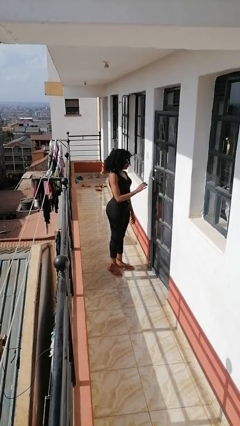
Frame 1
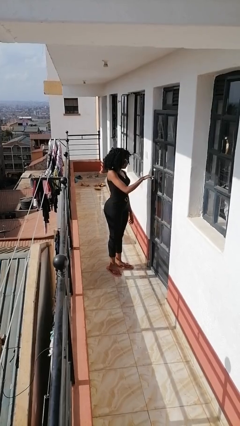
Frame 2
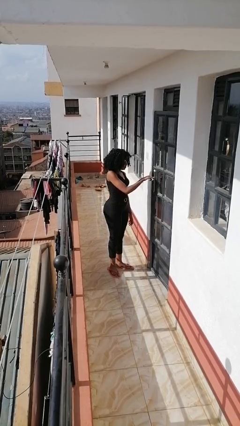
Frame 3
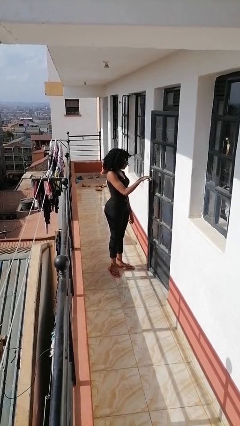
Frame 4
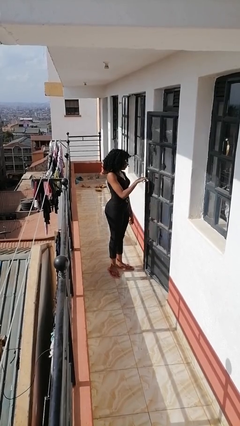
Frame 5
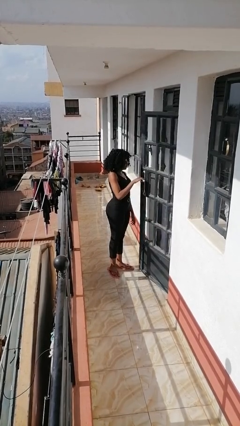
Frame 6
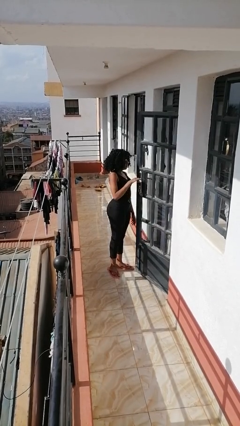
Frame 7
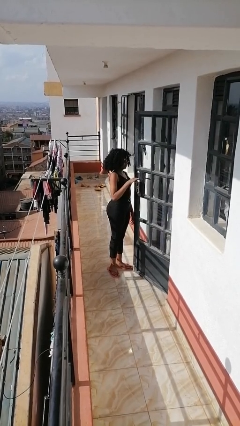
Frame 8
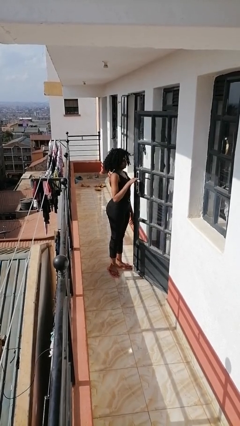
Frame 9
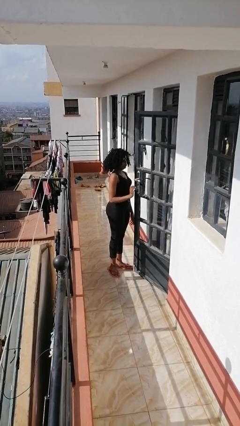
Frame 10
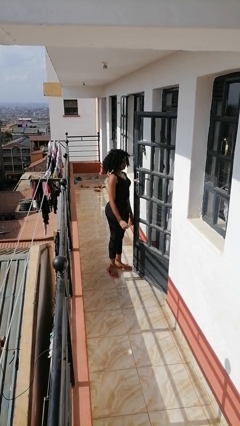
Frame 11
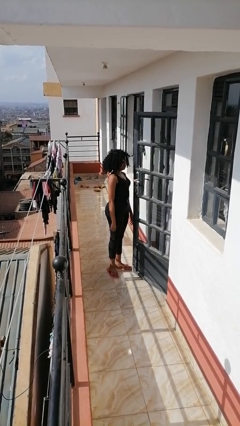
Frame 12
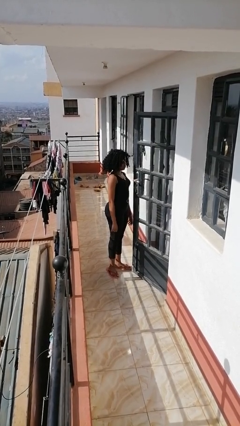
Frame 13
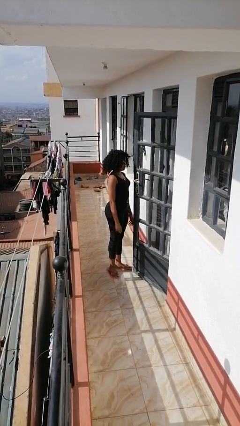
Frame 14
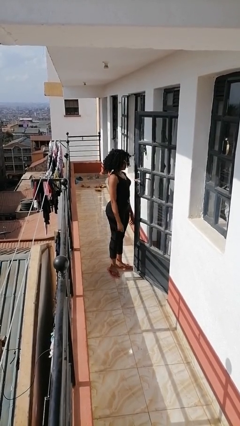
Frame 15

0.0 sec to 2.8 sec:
person opens facility door

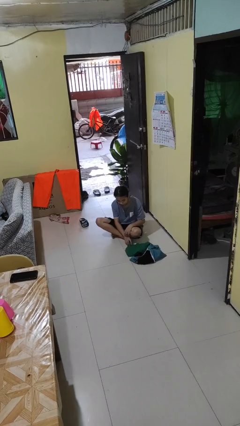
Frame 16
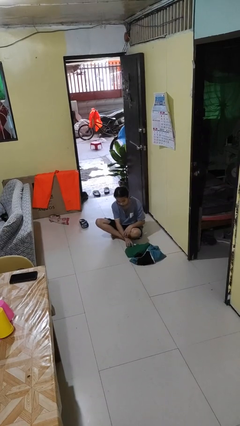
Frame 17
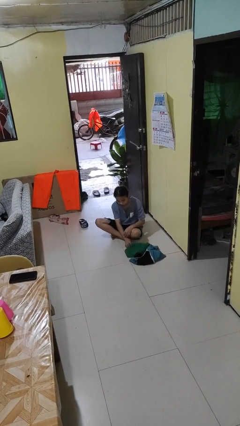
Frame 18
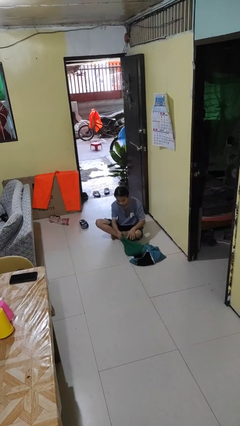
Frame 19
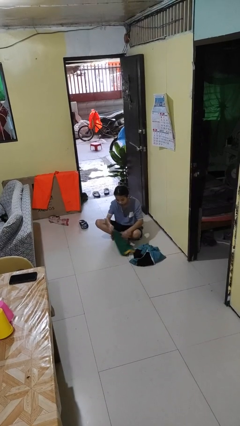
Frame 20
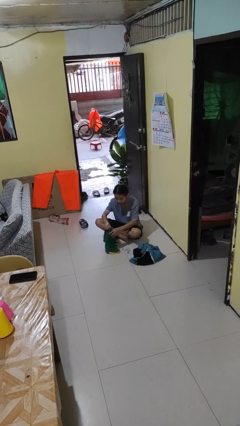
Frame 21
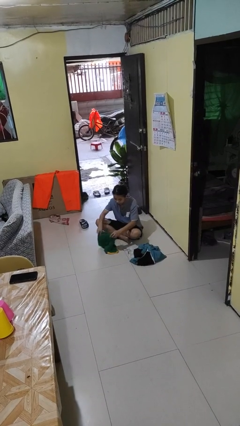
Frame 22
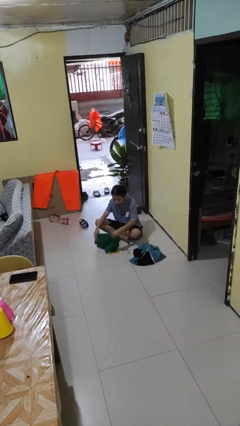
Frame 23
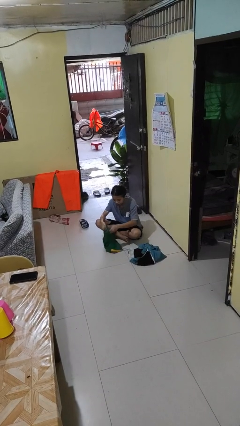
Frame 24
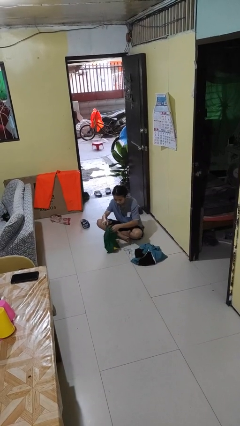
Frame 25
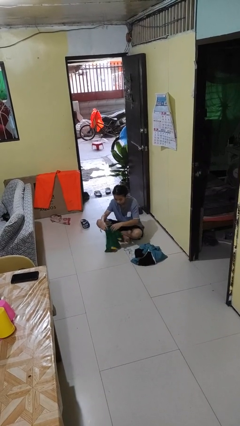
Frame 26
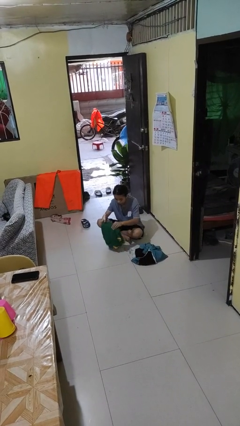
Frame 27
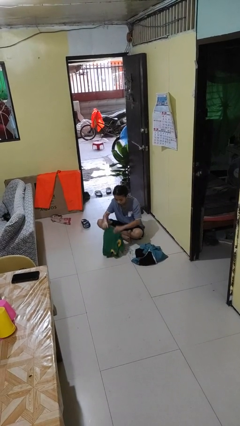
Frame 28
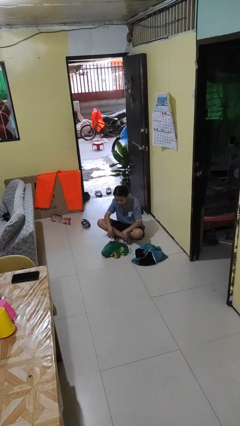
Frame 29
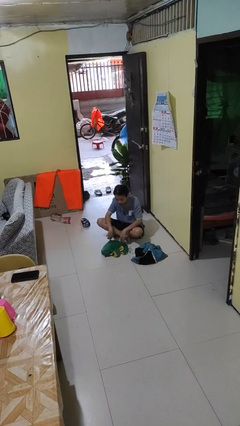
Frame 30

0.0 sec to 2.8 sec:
person folds shirt

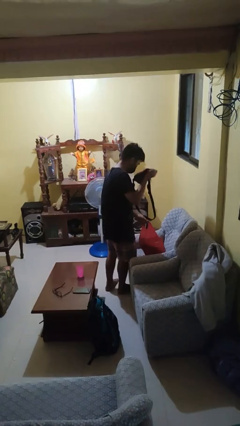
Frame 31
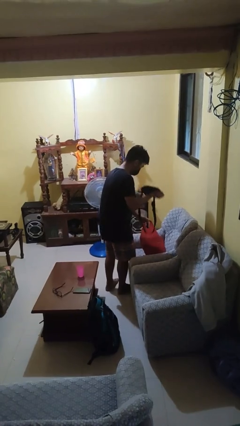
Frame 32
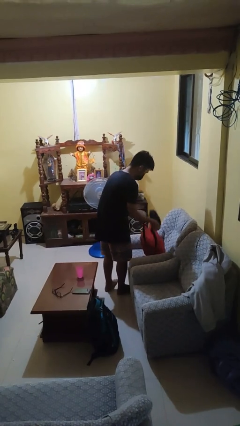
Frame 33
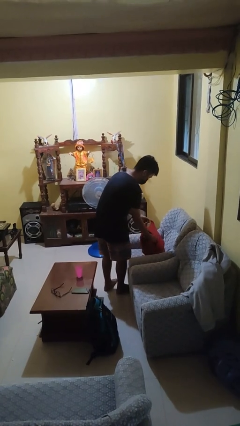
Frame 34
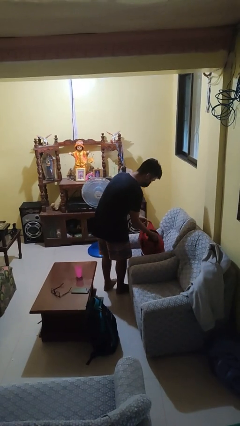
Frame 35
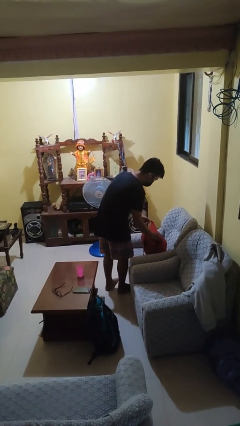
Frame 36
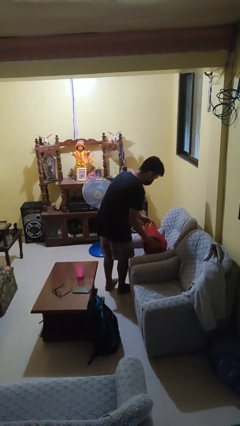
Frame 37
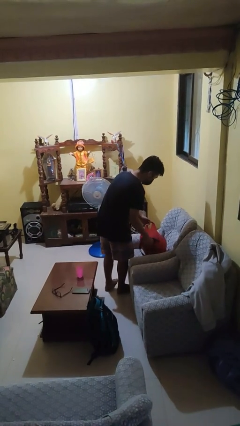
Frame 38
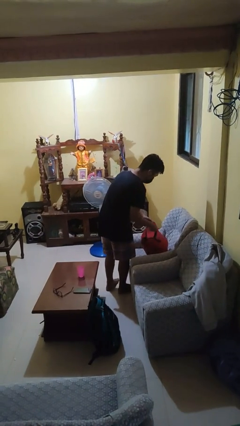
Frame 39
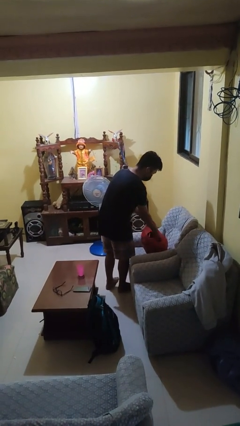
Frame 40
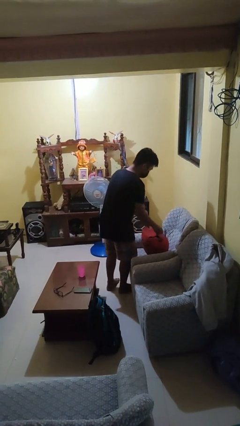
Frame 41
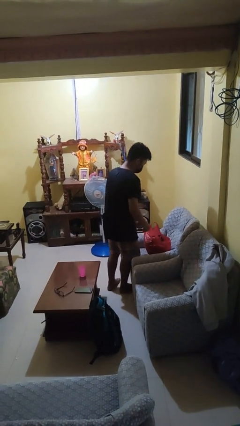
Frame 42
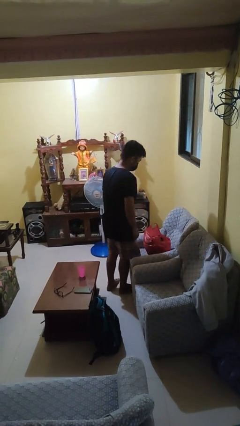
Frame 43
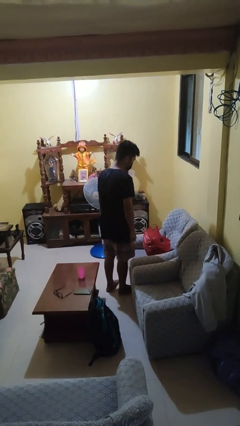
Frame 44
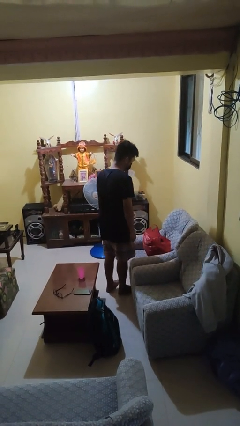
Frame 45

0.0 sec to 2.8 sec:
person puts object into bag

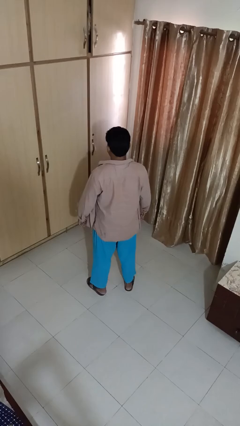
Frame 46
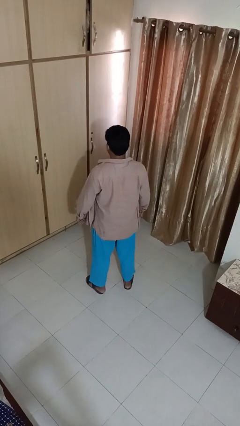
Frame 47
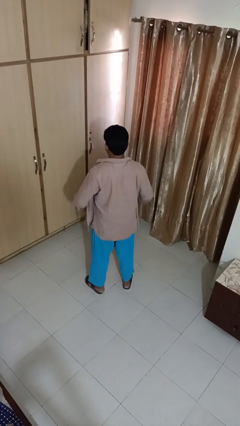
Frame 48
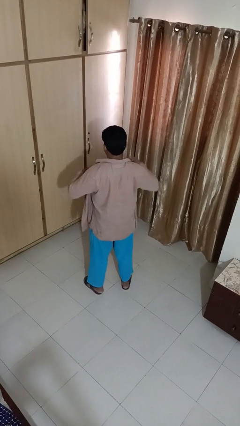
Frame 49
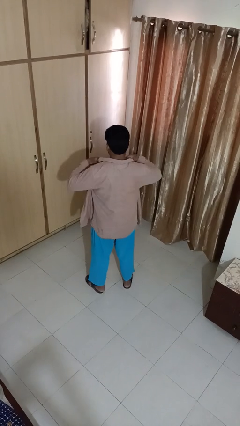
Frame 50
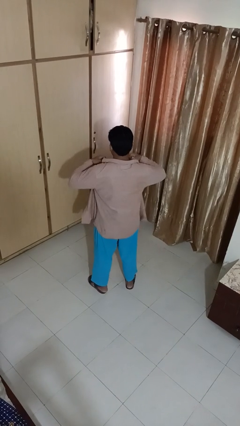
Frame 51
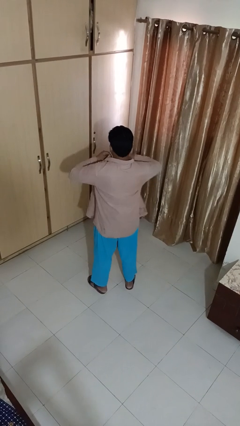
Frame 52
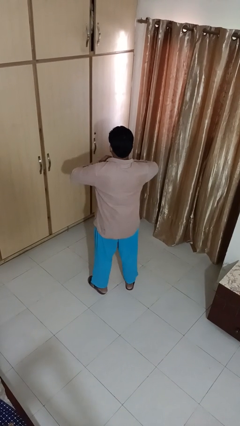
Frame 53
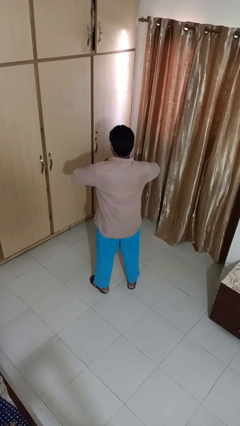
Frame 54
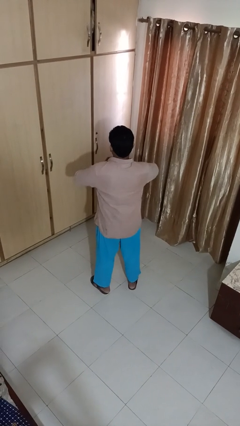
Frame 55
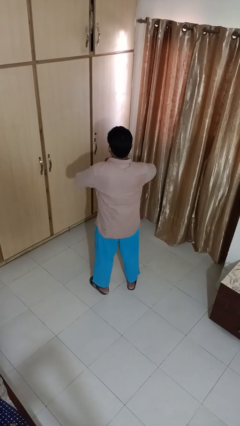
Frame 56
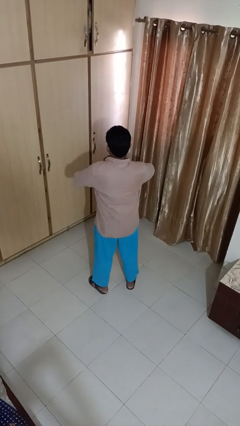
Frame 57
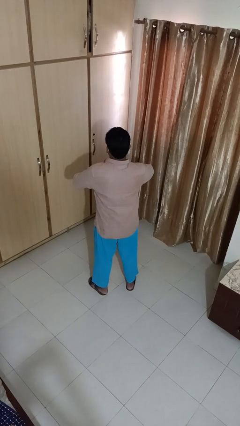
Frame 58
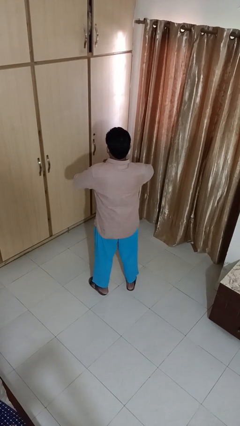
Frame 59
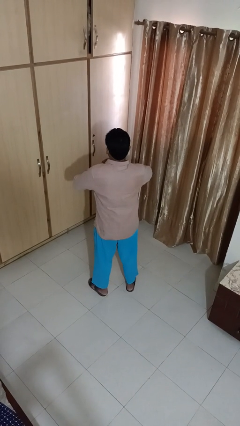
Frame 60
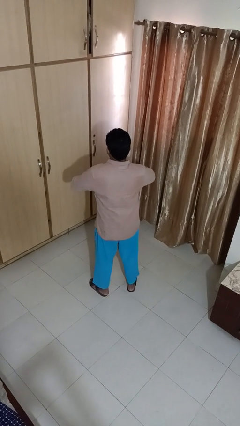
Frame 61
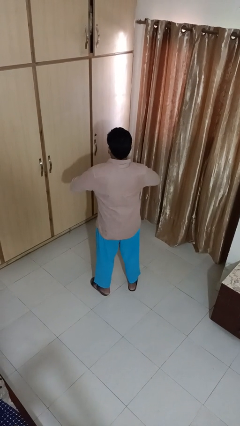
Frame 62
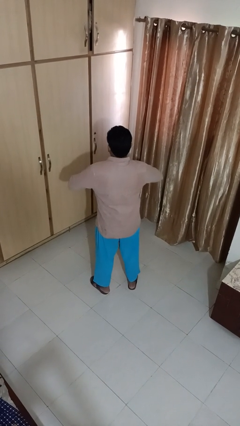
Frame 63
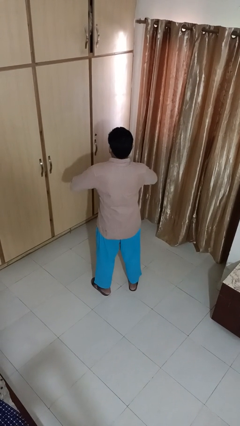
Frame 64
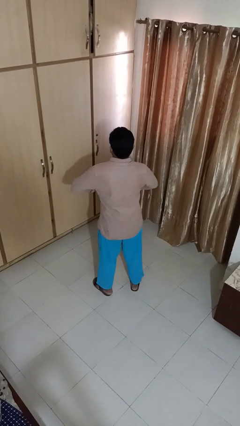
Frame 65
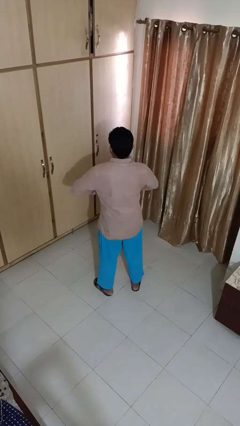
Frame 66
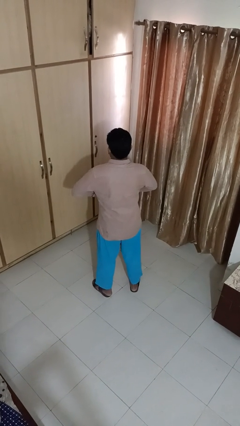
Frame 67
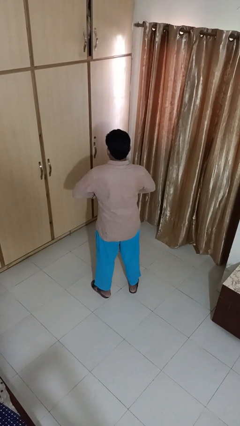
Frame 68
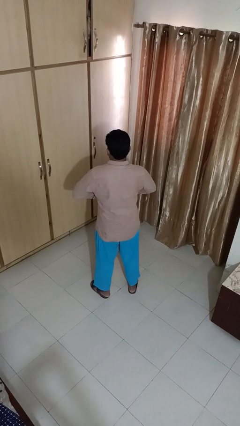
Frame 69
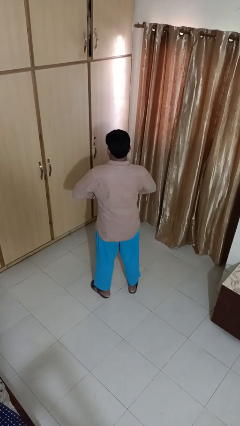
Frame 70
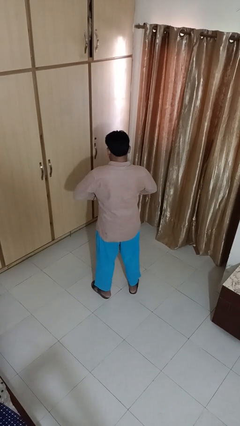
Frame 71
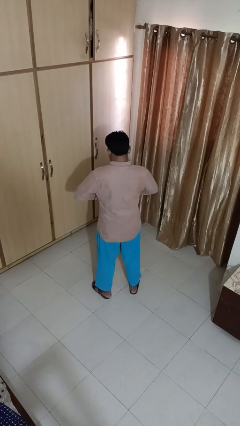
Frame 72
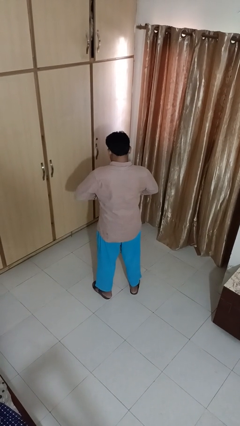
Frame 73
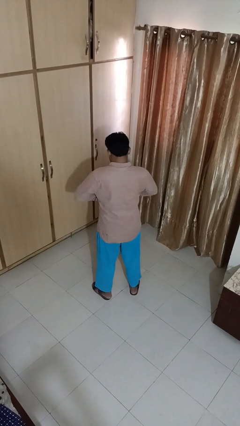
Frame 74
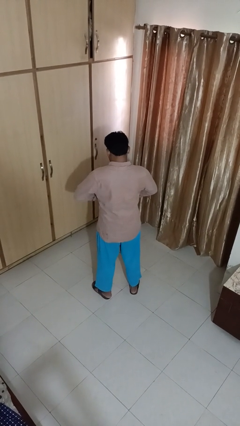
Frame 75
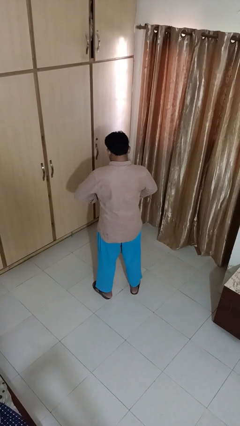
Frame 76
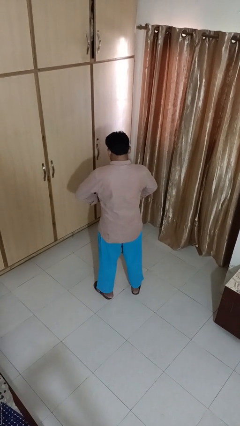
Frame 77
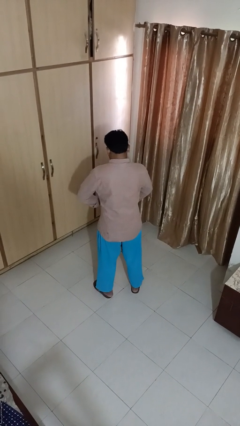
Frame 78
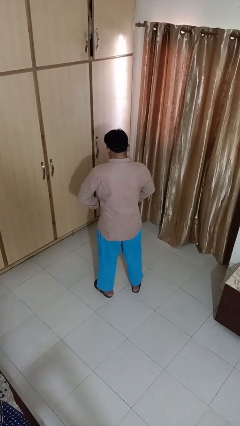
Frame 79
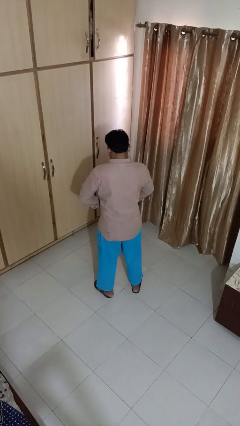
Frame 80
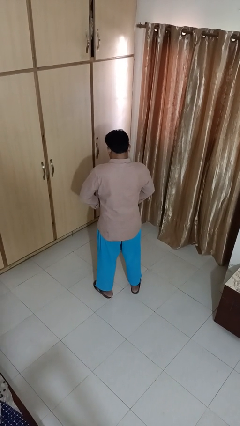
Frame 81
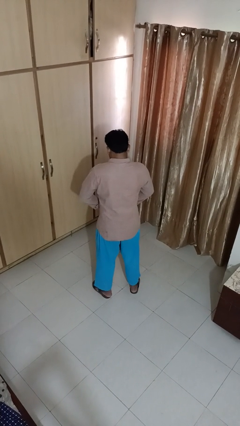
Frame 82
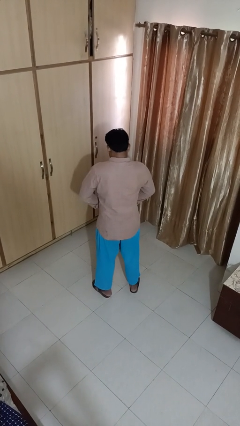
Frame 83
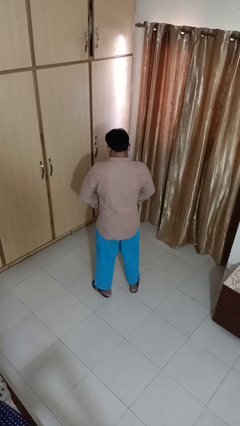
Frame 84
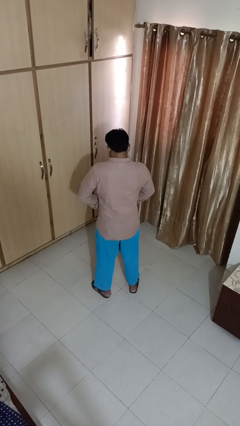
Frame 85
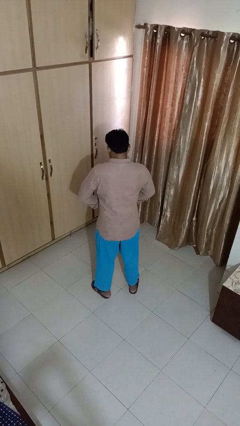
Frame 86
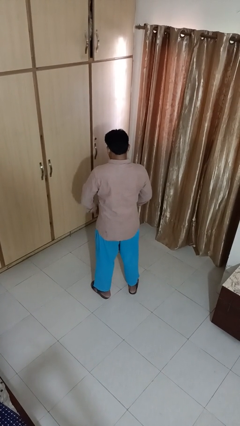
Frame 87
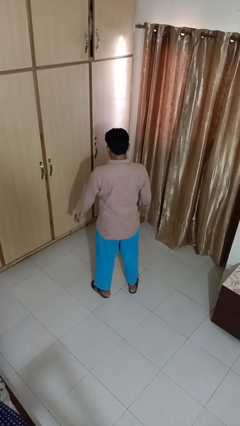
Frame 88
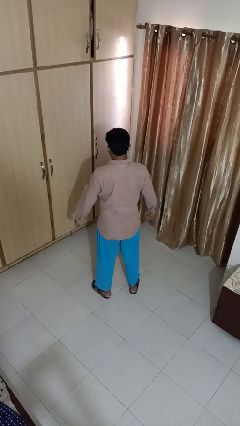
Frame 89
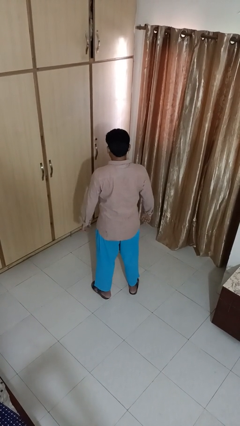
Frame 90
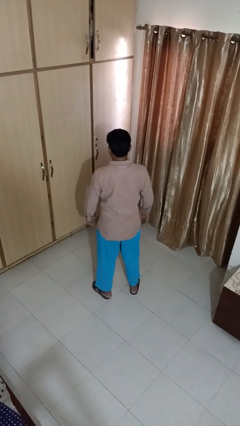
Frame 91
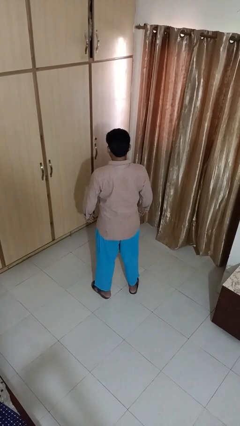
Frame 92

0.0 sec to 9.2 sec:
person buttons shirt
